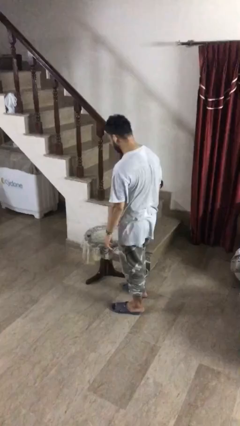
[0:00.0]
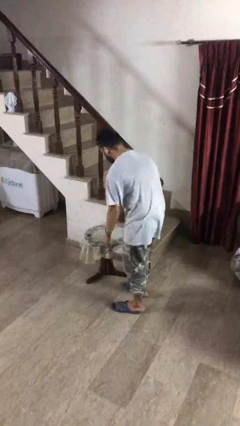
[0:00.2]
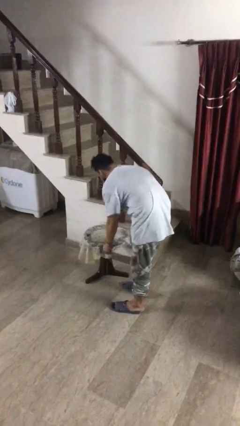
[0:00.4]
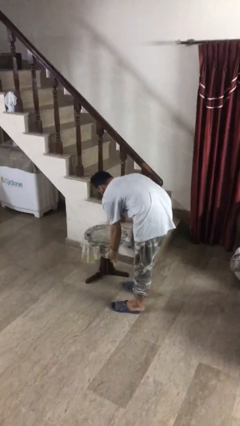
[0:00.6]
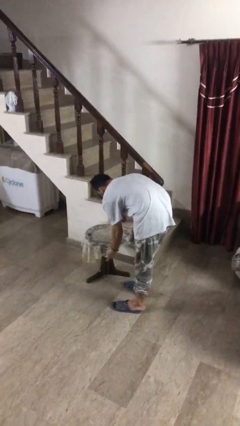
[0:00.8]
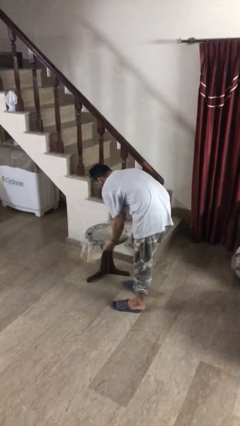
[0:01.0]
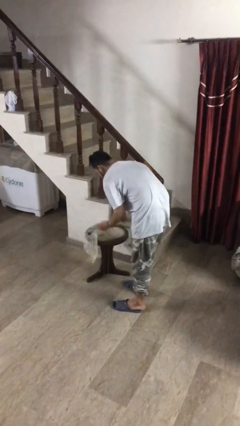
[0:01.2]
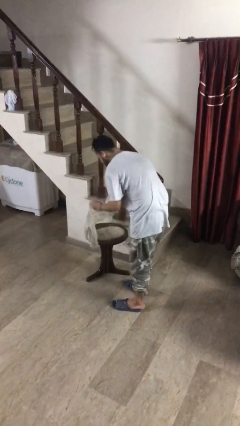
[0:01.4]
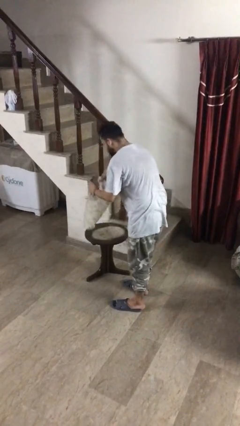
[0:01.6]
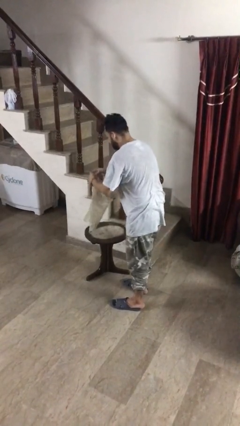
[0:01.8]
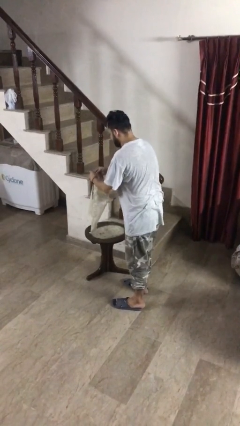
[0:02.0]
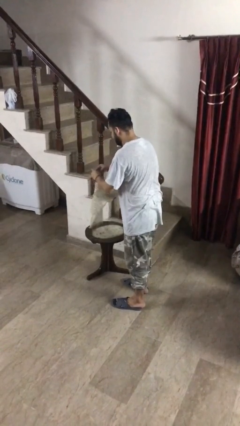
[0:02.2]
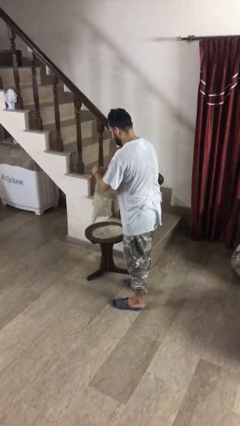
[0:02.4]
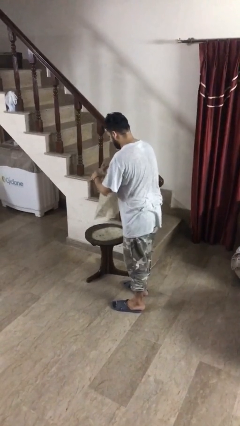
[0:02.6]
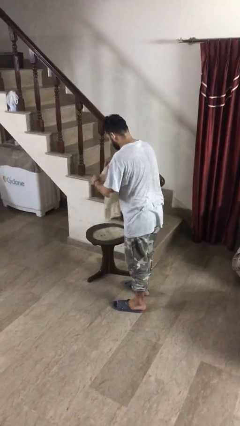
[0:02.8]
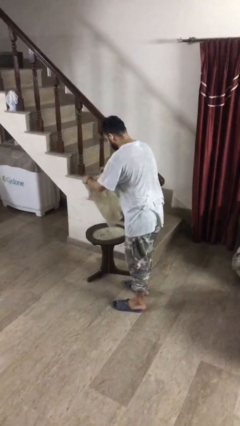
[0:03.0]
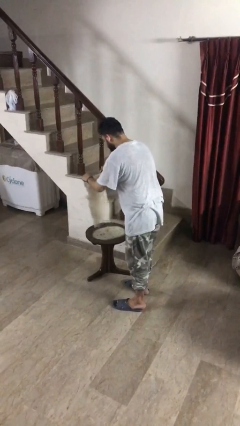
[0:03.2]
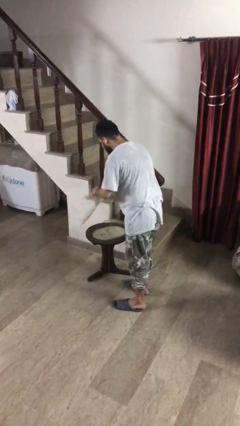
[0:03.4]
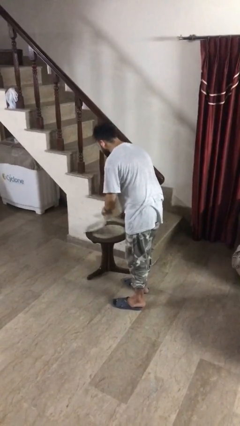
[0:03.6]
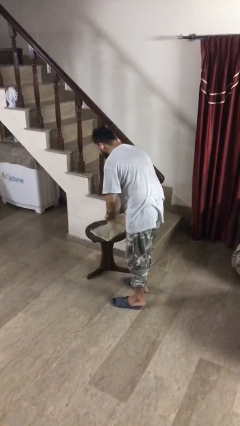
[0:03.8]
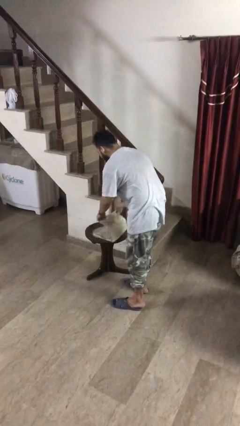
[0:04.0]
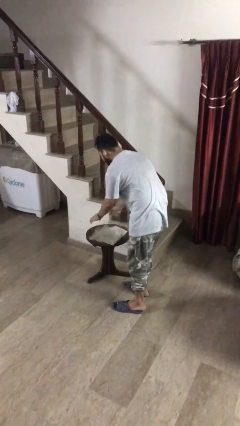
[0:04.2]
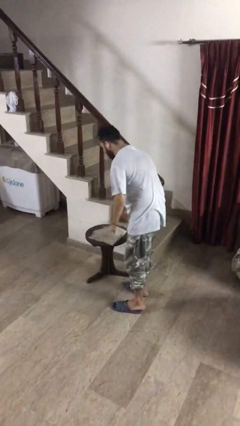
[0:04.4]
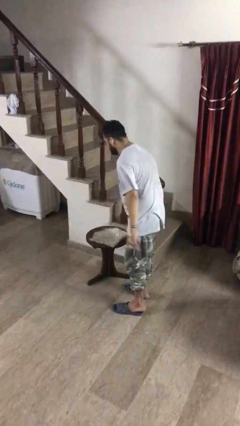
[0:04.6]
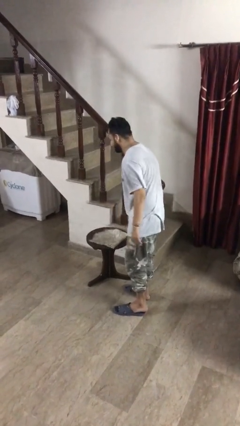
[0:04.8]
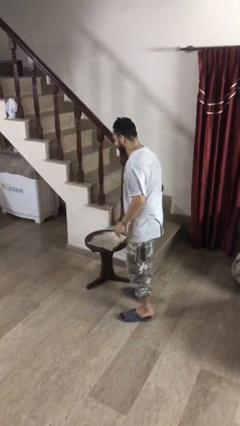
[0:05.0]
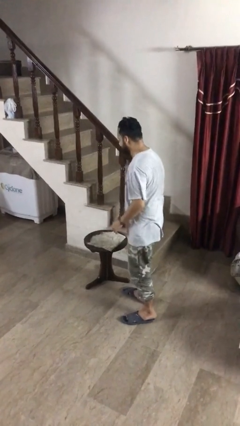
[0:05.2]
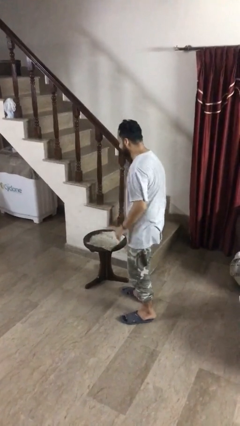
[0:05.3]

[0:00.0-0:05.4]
person folds tablecloth

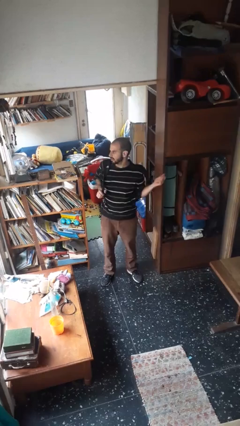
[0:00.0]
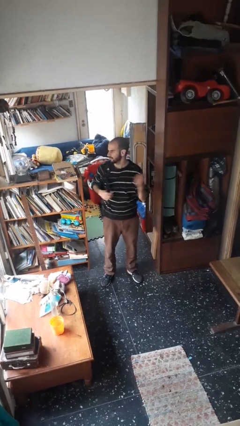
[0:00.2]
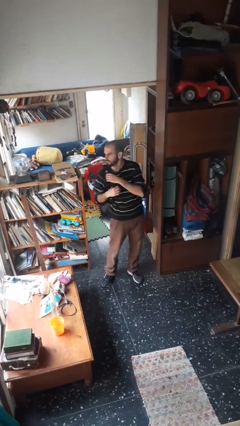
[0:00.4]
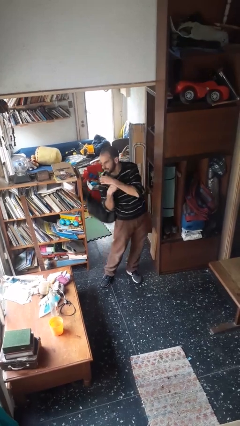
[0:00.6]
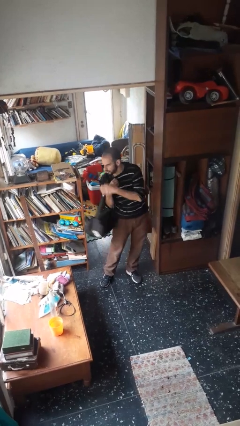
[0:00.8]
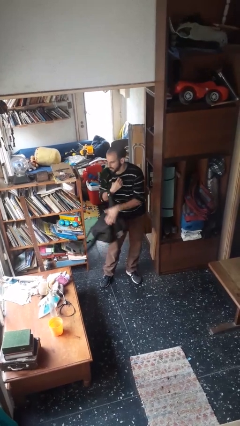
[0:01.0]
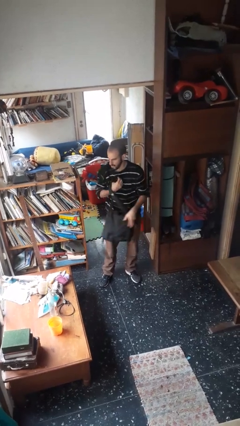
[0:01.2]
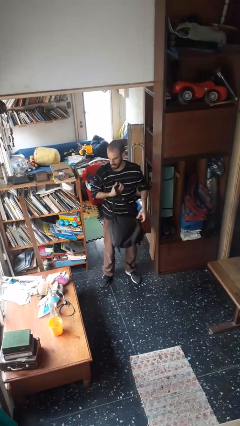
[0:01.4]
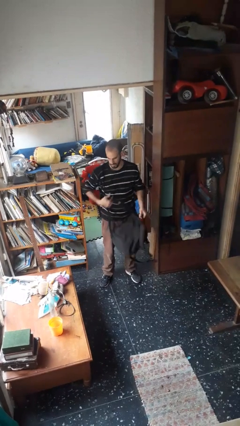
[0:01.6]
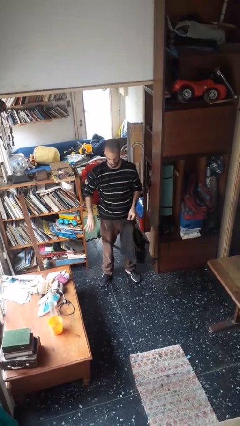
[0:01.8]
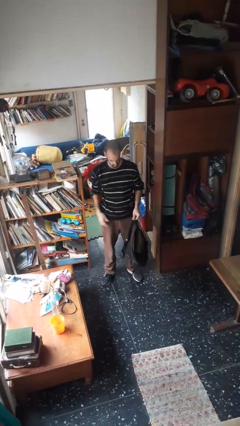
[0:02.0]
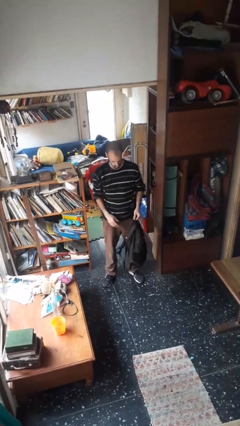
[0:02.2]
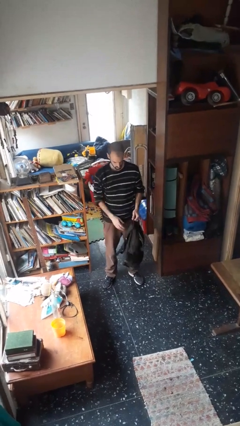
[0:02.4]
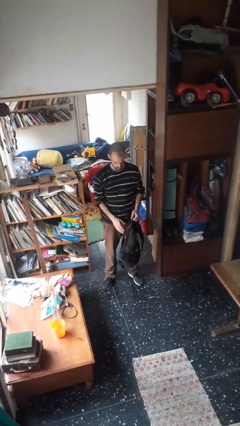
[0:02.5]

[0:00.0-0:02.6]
person takes off backpack

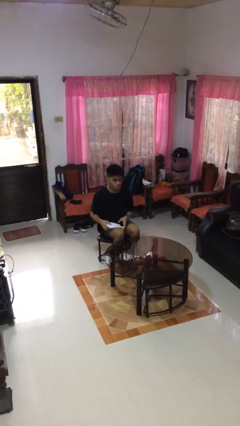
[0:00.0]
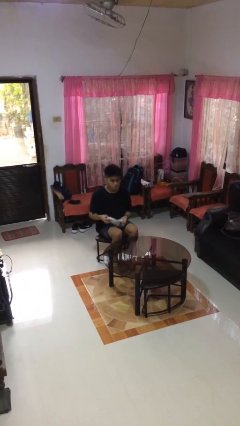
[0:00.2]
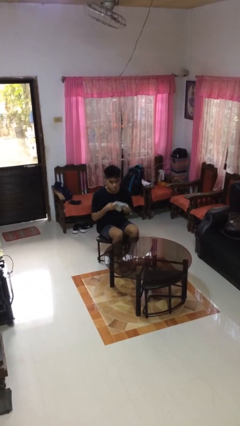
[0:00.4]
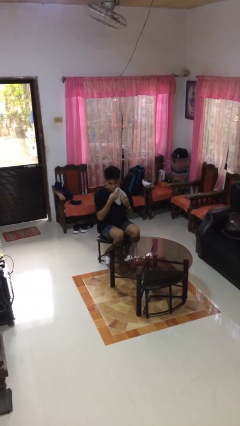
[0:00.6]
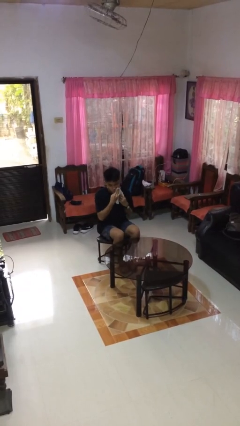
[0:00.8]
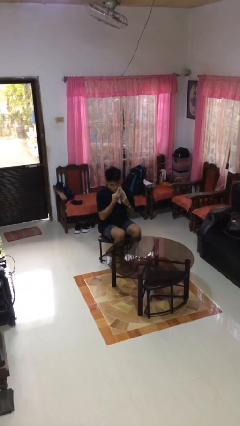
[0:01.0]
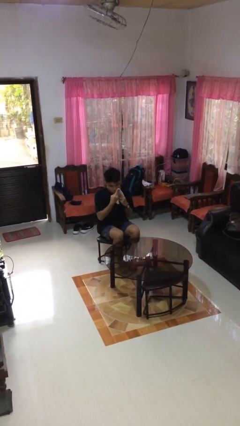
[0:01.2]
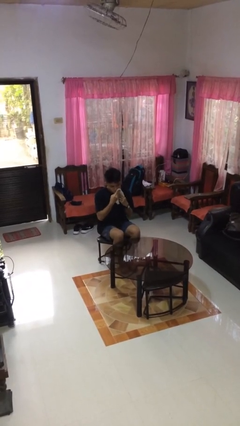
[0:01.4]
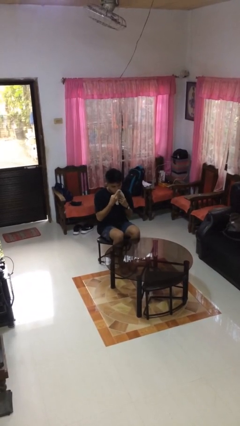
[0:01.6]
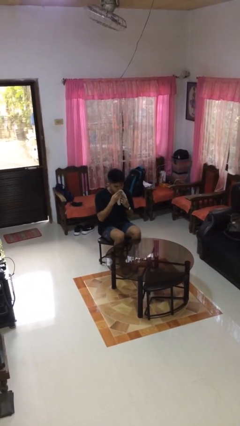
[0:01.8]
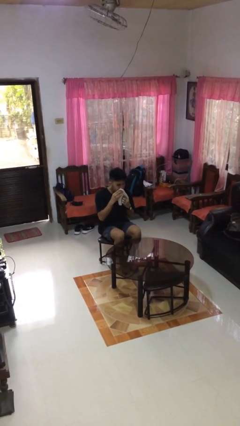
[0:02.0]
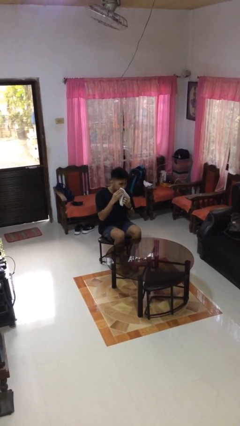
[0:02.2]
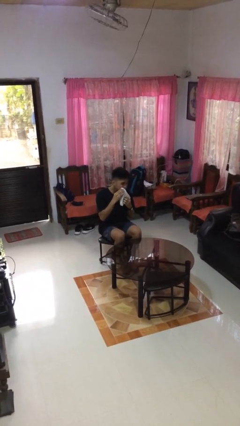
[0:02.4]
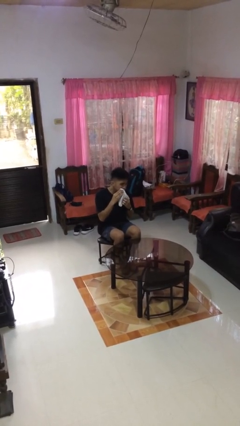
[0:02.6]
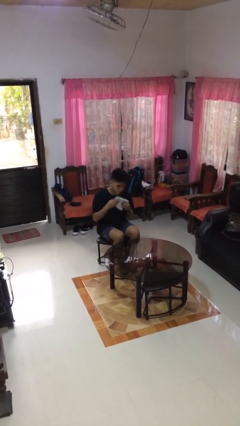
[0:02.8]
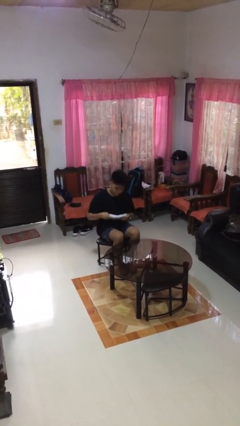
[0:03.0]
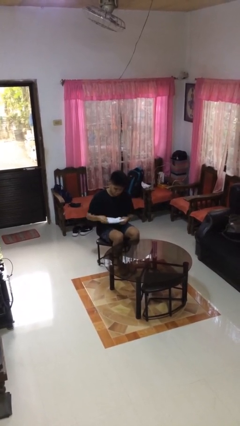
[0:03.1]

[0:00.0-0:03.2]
person wipes mouth with napkin

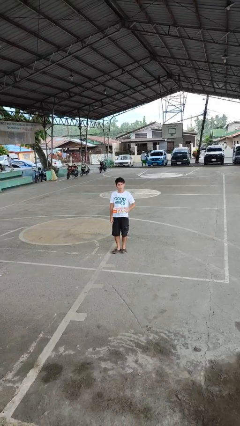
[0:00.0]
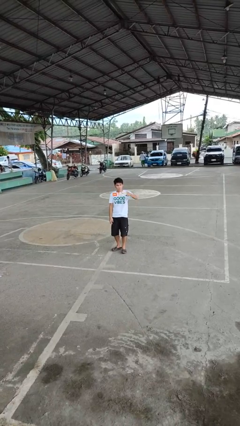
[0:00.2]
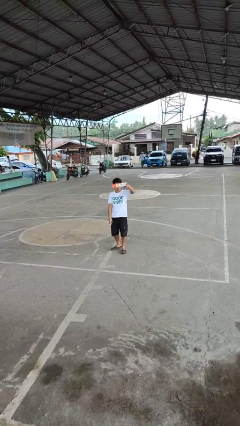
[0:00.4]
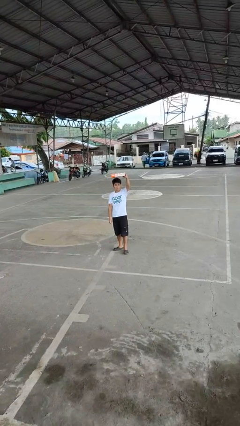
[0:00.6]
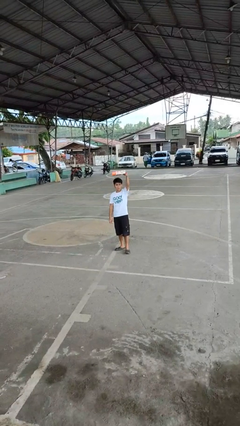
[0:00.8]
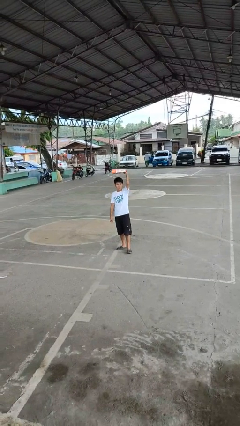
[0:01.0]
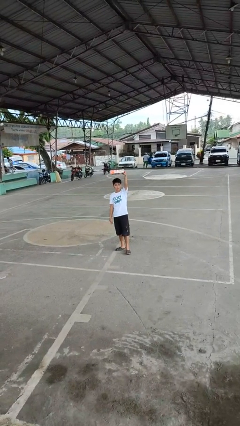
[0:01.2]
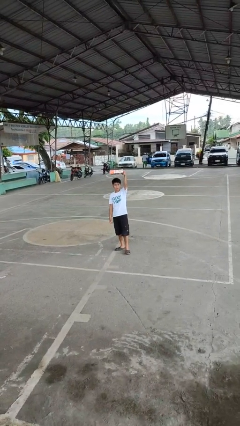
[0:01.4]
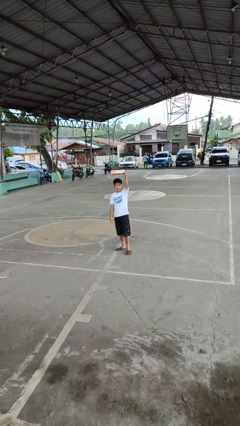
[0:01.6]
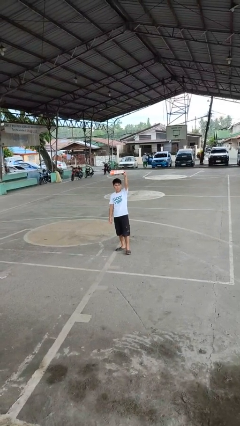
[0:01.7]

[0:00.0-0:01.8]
person holds object above head

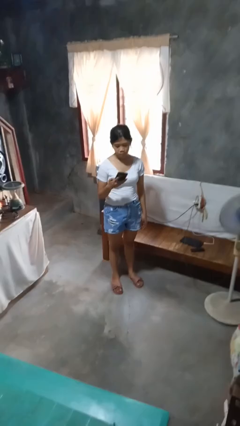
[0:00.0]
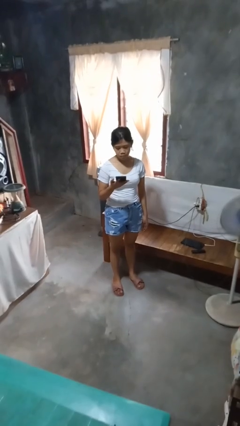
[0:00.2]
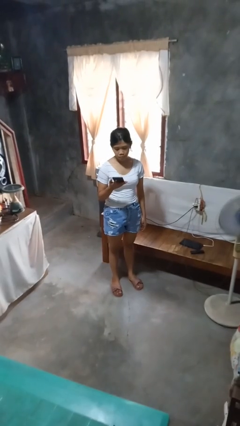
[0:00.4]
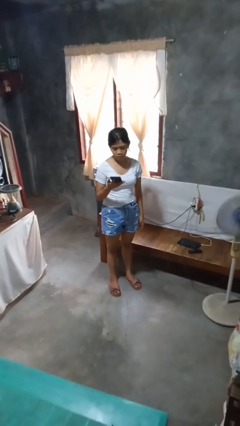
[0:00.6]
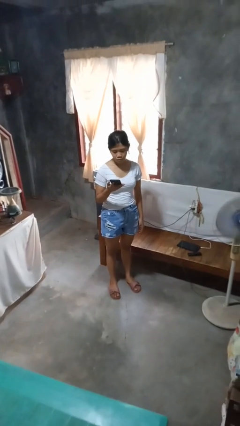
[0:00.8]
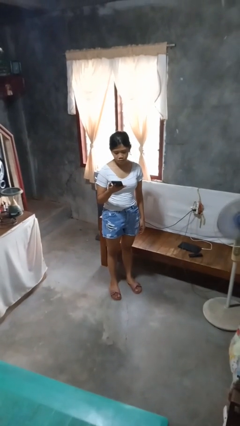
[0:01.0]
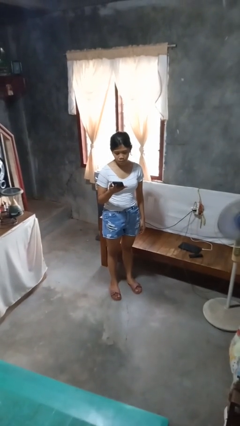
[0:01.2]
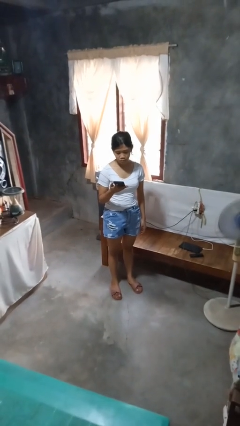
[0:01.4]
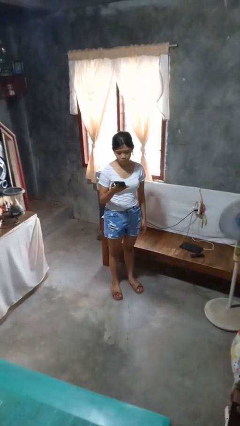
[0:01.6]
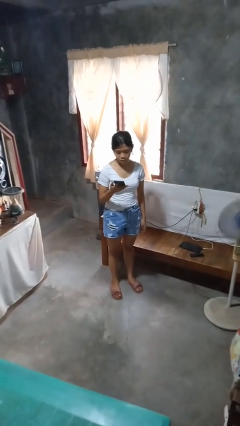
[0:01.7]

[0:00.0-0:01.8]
person takes phone from pocket

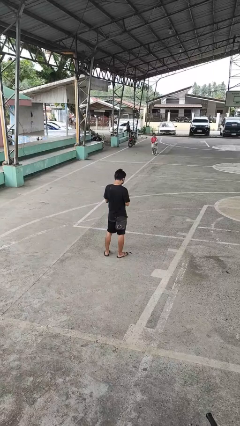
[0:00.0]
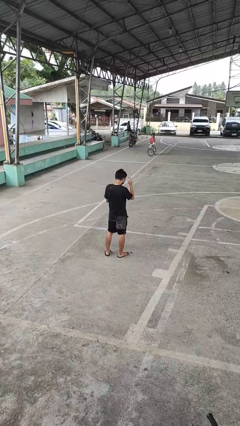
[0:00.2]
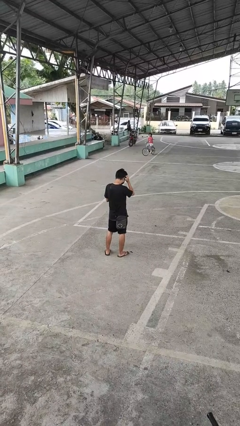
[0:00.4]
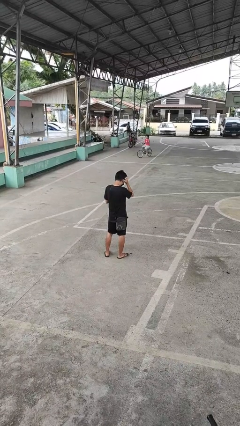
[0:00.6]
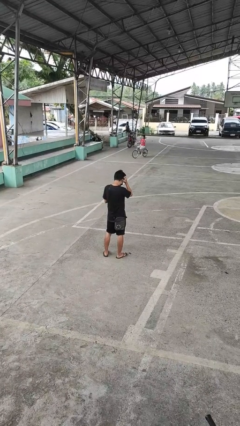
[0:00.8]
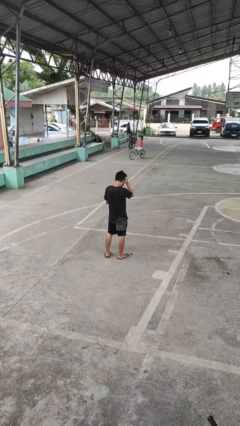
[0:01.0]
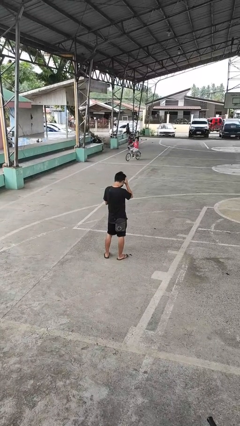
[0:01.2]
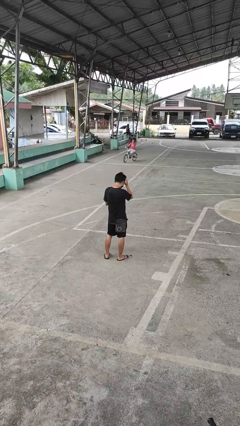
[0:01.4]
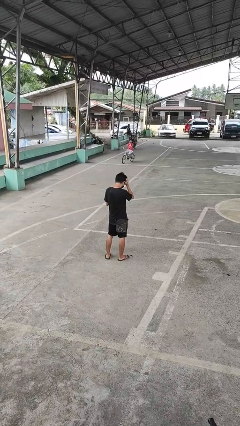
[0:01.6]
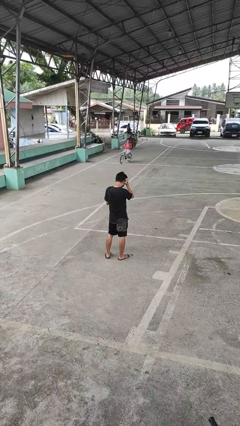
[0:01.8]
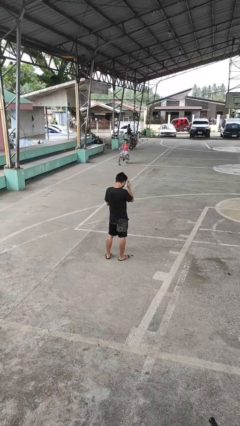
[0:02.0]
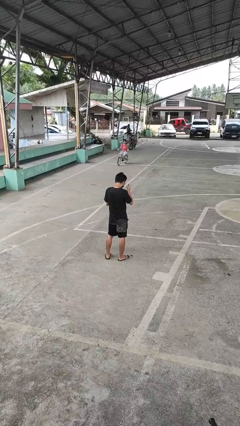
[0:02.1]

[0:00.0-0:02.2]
person scratches face

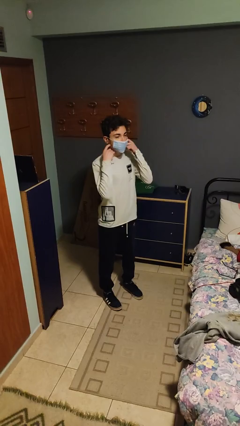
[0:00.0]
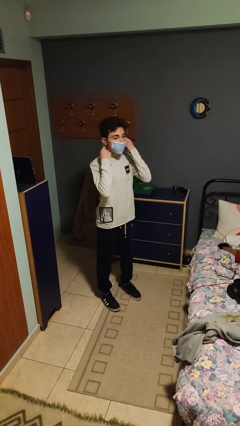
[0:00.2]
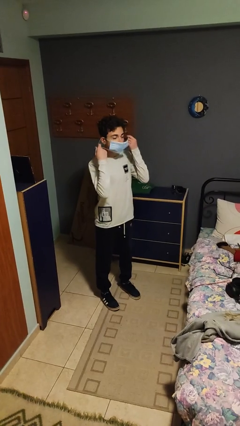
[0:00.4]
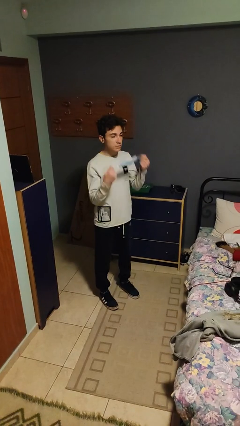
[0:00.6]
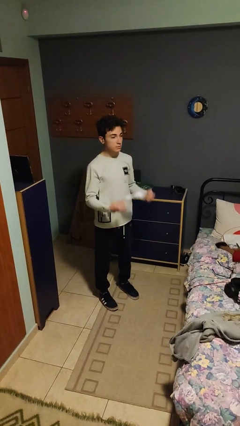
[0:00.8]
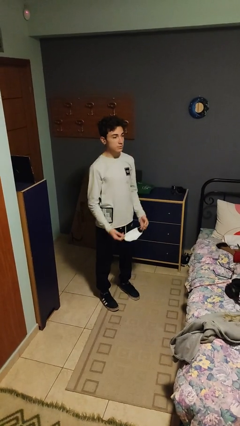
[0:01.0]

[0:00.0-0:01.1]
person takes off facemask
